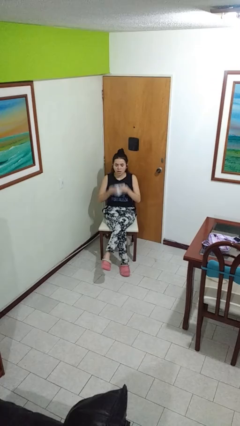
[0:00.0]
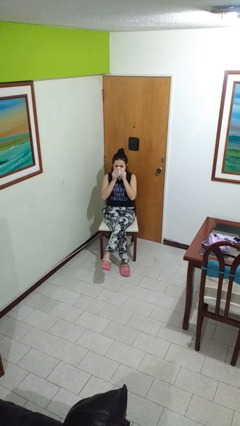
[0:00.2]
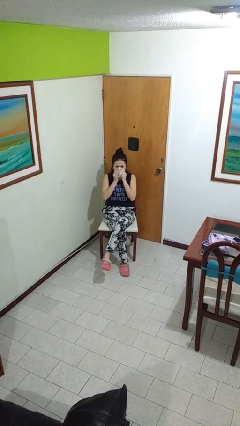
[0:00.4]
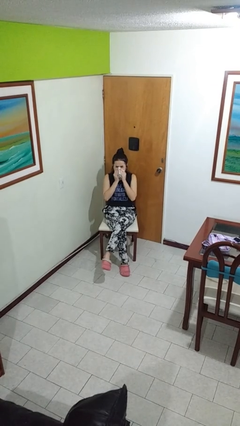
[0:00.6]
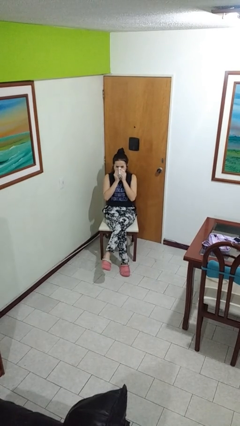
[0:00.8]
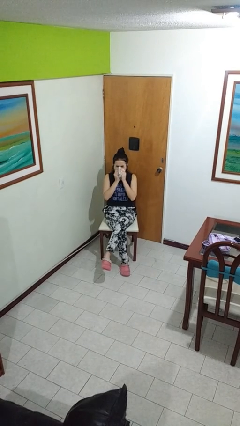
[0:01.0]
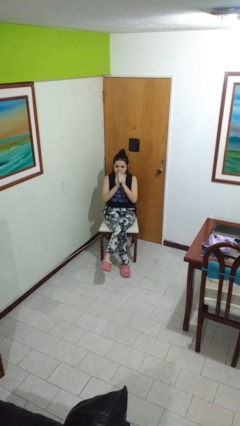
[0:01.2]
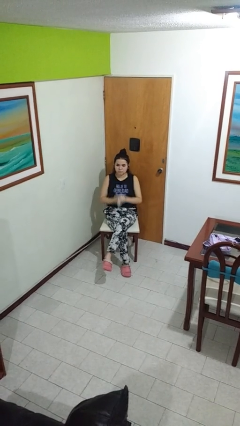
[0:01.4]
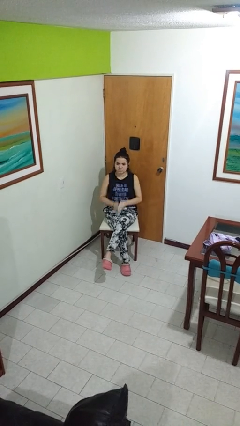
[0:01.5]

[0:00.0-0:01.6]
person blows nose

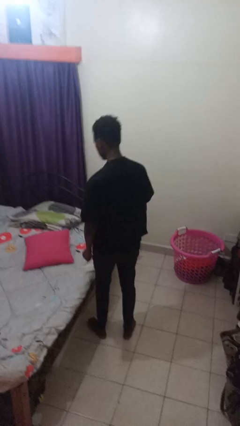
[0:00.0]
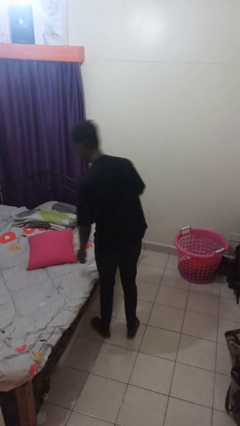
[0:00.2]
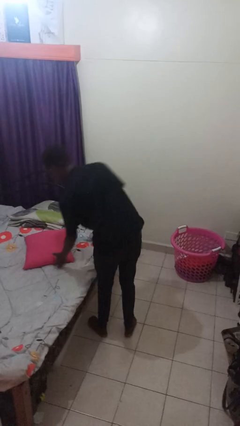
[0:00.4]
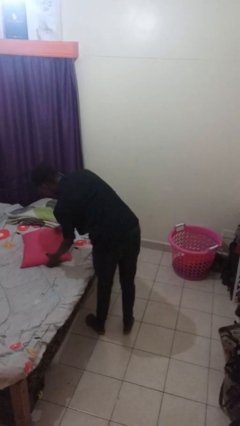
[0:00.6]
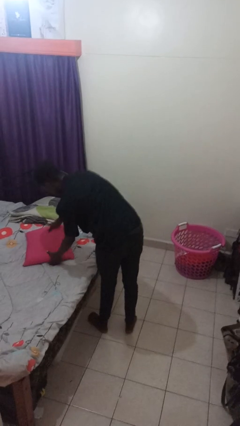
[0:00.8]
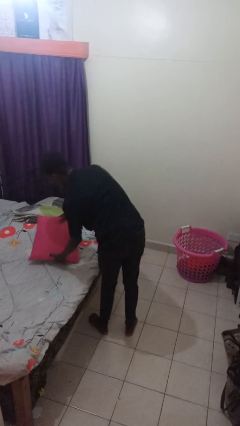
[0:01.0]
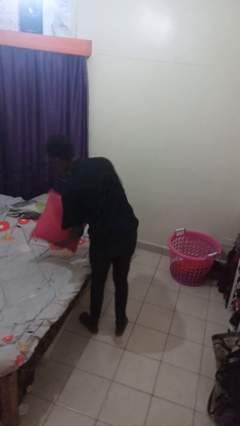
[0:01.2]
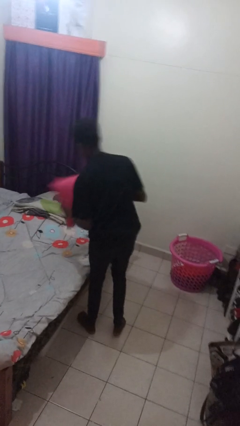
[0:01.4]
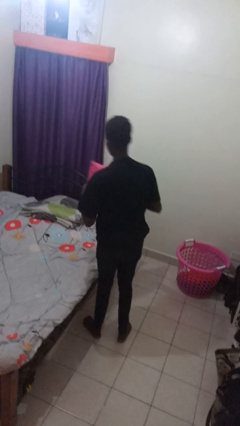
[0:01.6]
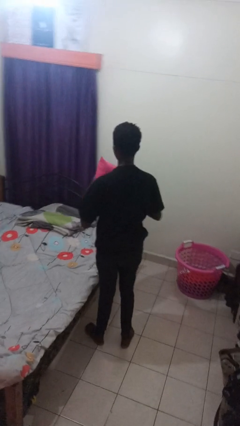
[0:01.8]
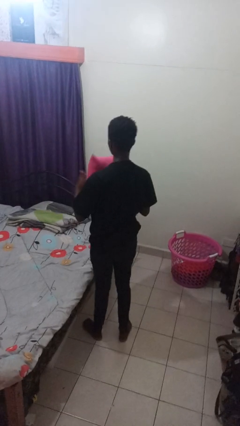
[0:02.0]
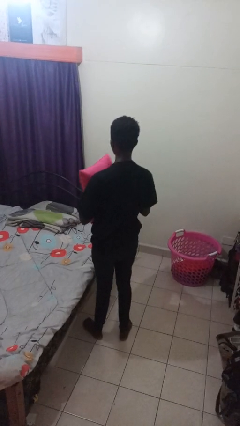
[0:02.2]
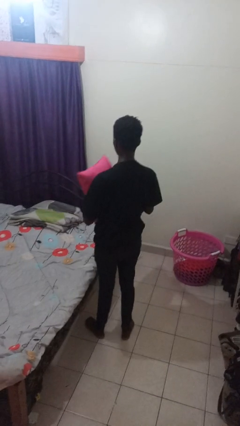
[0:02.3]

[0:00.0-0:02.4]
person picks up object from bed

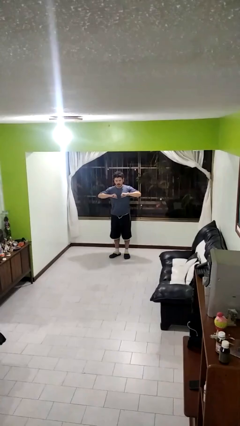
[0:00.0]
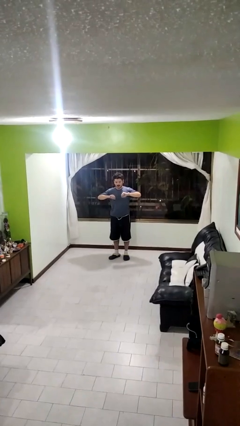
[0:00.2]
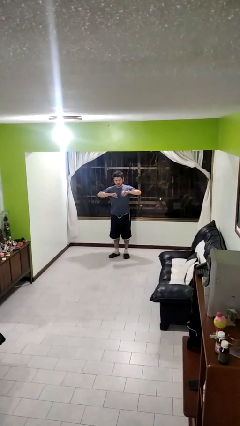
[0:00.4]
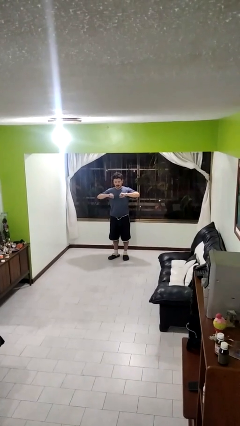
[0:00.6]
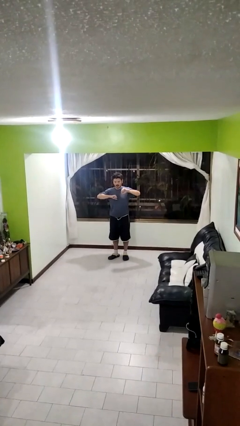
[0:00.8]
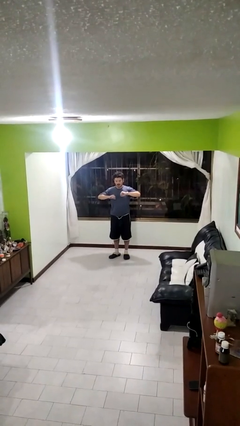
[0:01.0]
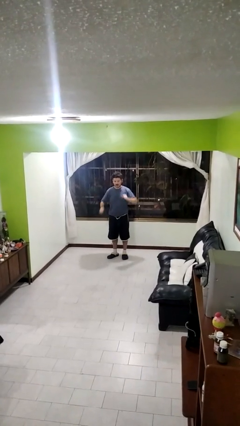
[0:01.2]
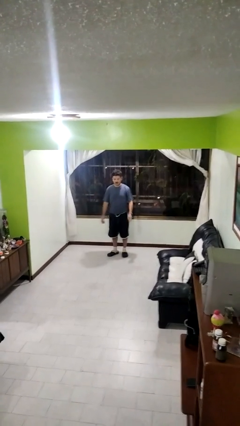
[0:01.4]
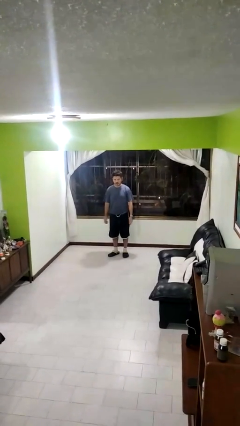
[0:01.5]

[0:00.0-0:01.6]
person drums on chest

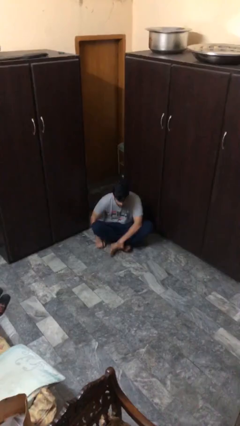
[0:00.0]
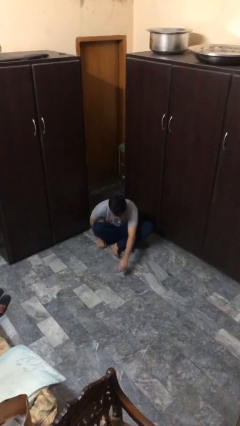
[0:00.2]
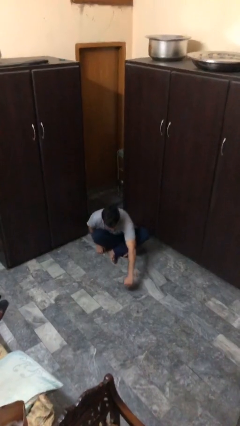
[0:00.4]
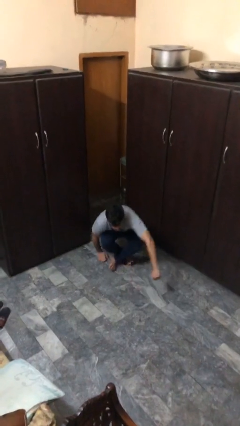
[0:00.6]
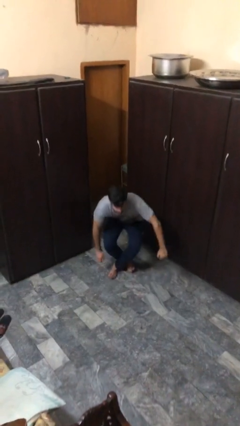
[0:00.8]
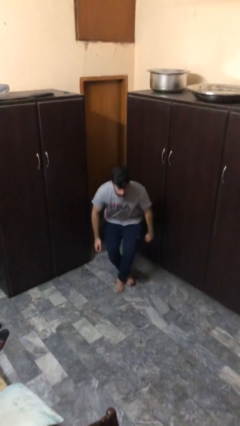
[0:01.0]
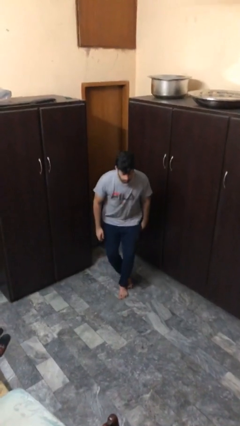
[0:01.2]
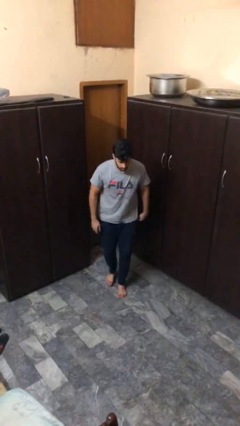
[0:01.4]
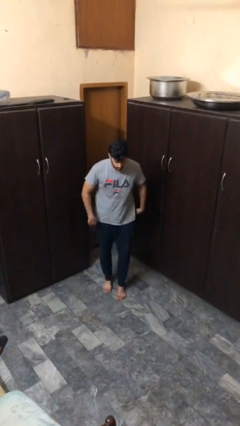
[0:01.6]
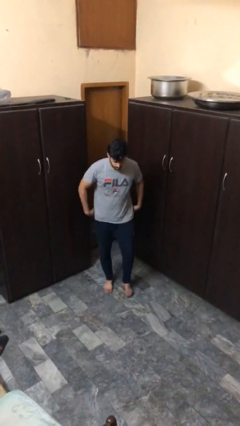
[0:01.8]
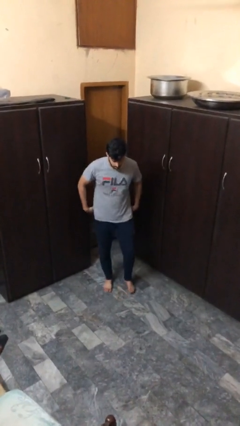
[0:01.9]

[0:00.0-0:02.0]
person stands up from floor

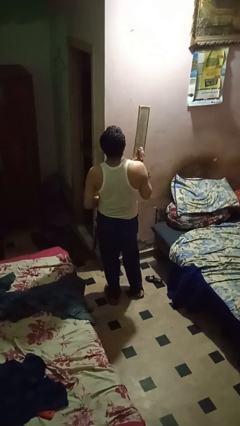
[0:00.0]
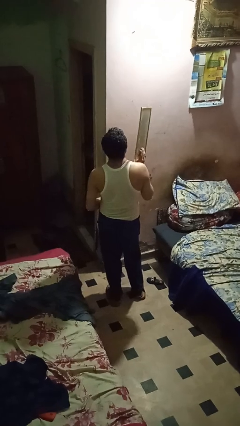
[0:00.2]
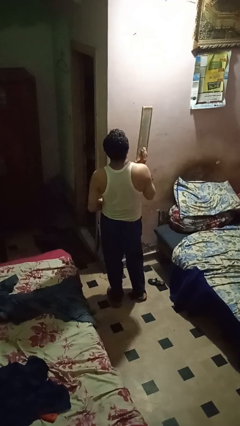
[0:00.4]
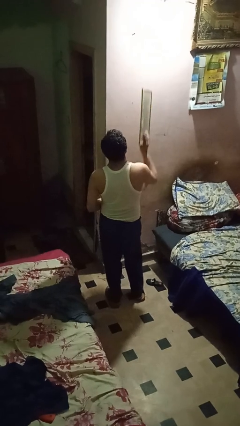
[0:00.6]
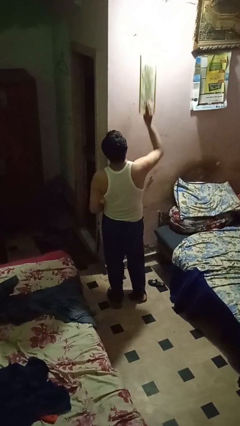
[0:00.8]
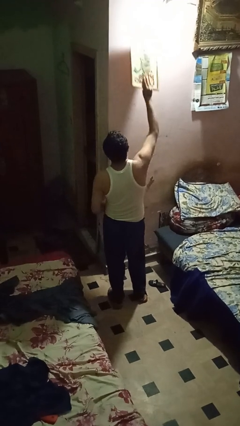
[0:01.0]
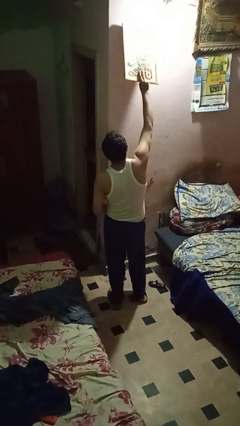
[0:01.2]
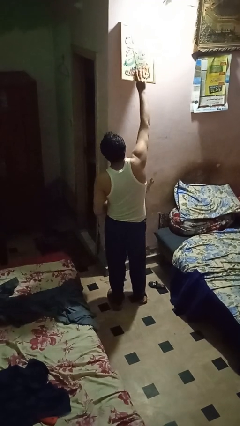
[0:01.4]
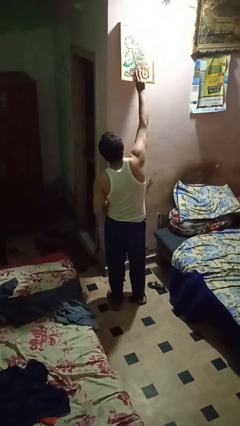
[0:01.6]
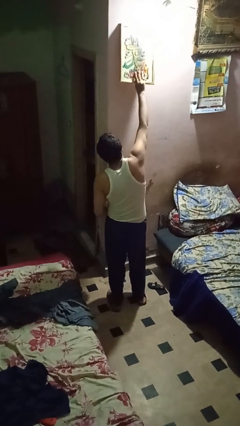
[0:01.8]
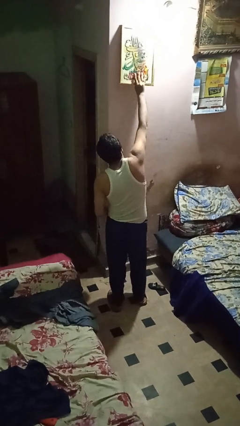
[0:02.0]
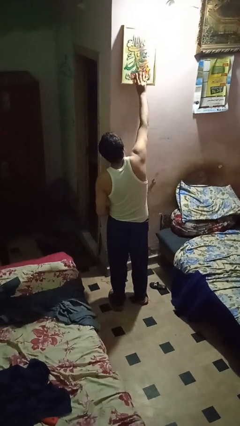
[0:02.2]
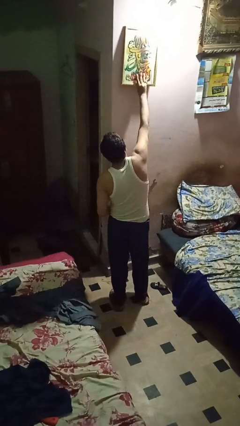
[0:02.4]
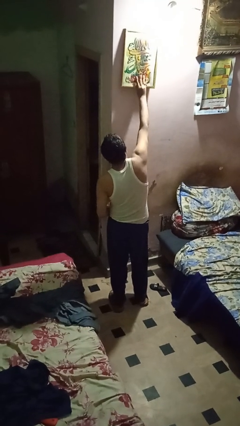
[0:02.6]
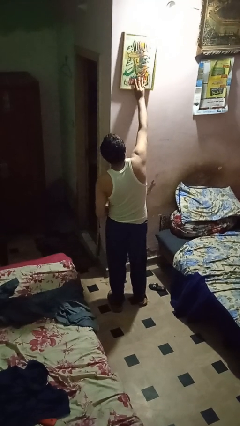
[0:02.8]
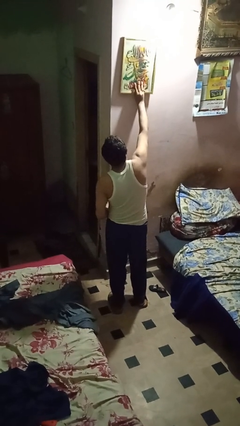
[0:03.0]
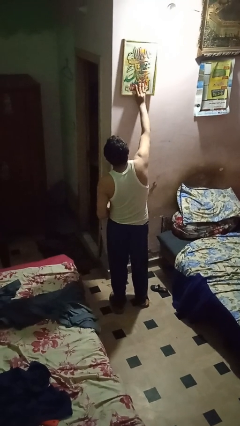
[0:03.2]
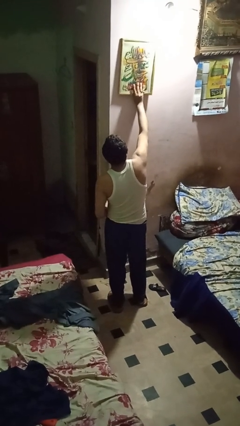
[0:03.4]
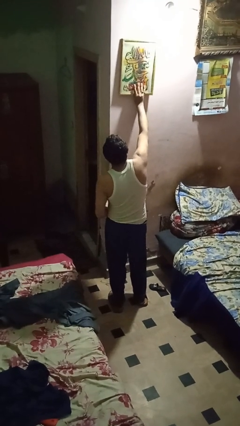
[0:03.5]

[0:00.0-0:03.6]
person puts up picture frame

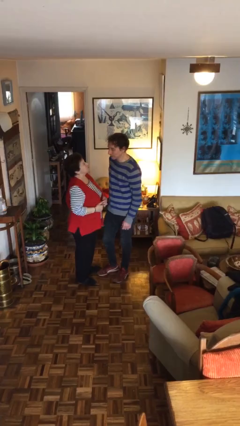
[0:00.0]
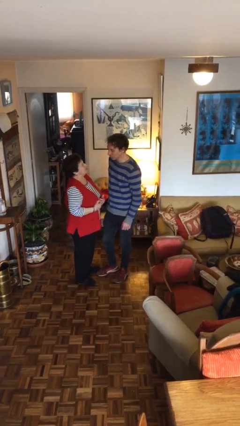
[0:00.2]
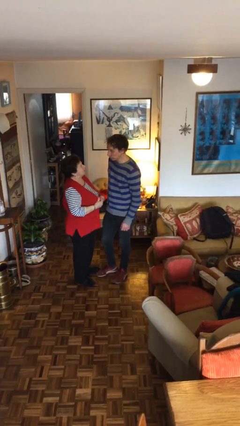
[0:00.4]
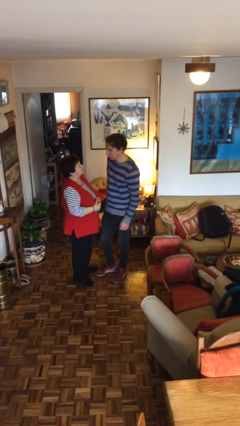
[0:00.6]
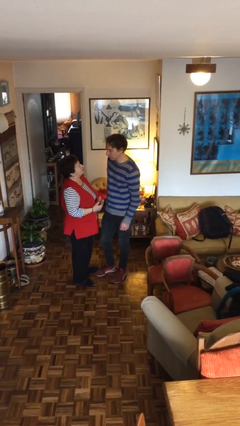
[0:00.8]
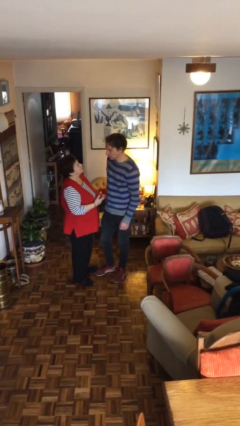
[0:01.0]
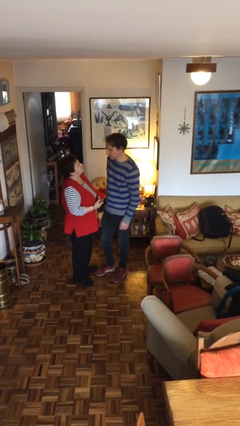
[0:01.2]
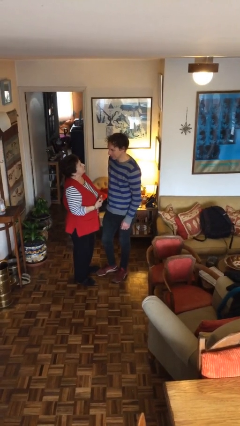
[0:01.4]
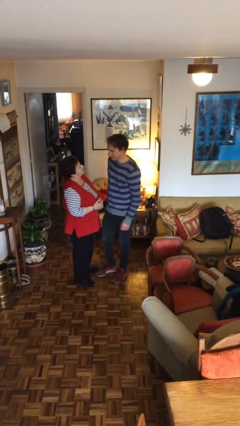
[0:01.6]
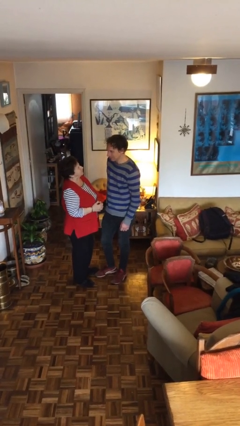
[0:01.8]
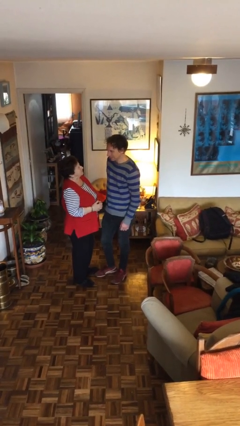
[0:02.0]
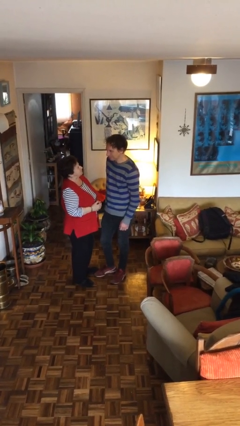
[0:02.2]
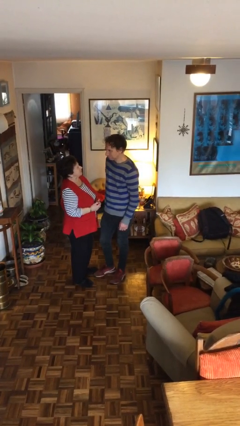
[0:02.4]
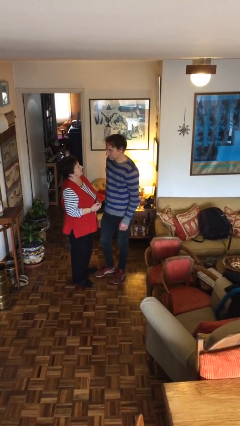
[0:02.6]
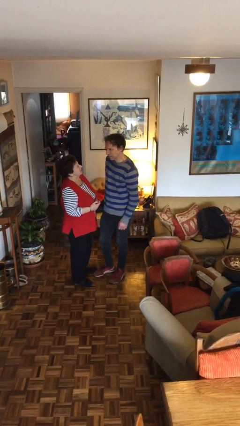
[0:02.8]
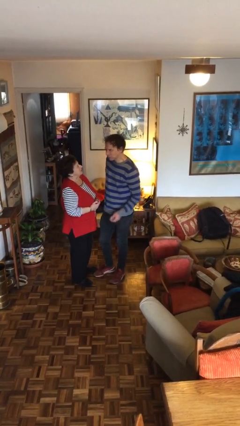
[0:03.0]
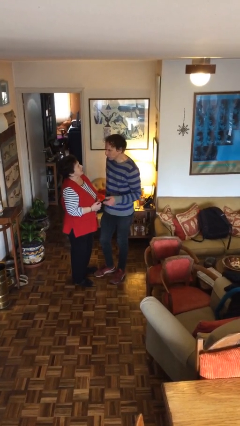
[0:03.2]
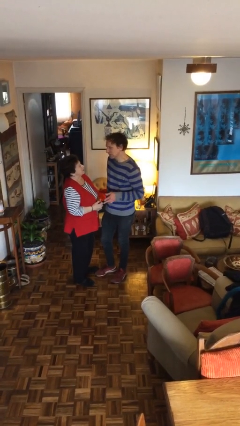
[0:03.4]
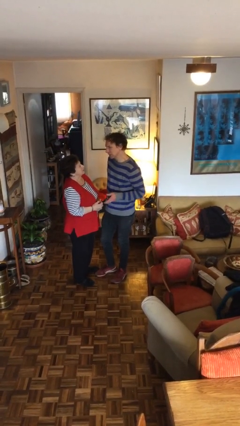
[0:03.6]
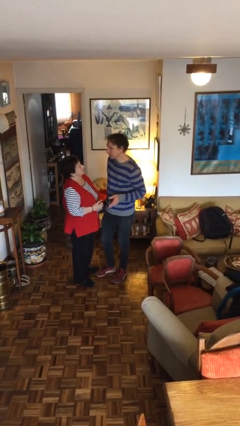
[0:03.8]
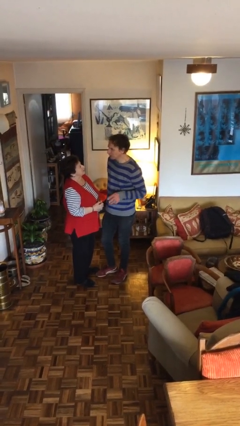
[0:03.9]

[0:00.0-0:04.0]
person talks to person

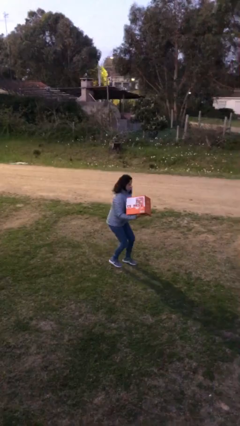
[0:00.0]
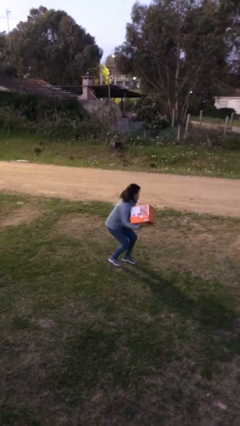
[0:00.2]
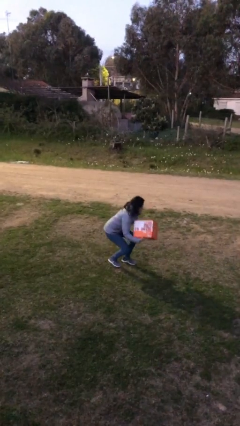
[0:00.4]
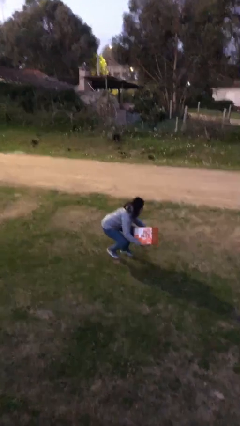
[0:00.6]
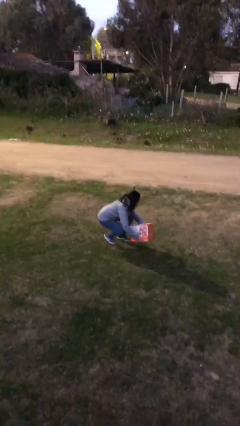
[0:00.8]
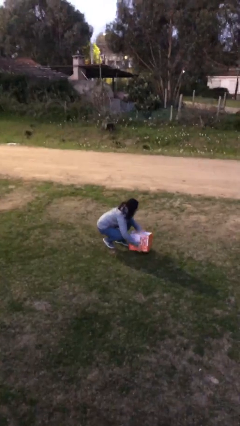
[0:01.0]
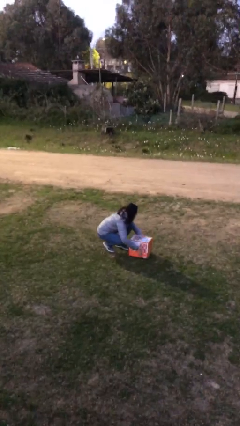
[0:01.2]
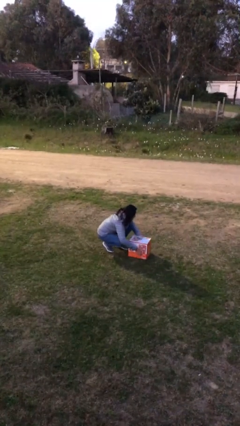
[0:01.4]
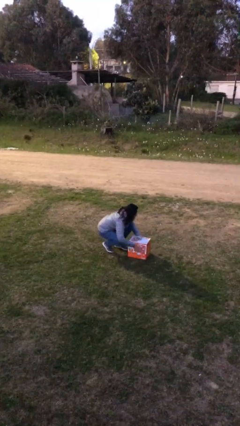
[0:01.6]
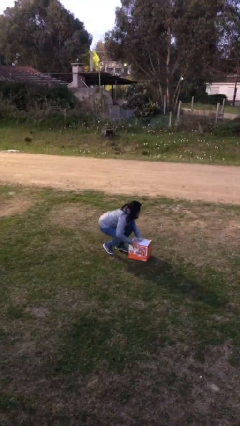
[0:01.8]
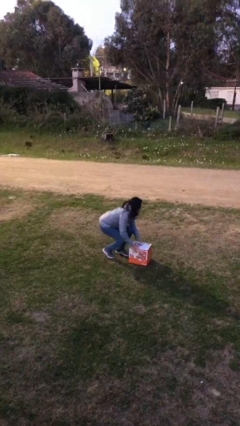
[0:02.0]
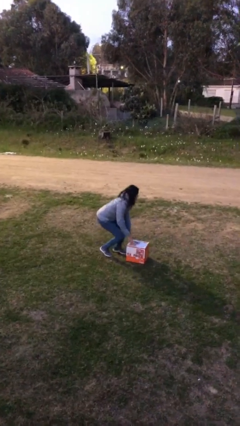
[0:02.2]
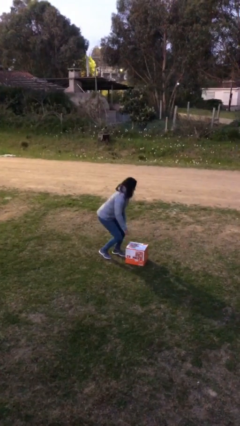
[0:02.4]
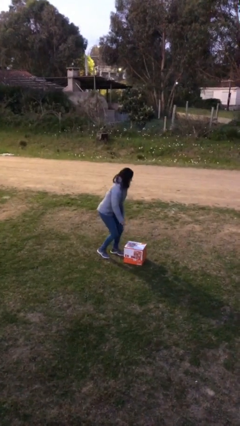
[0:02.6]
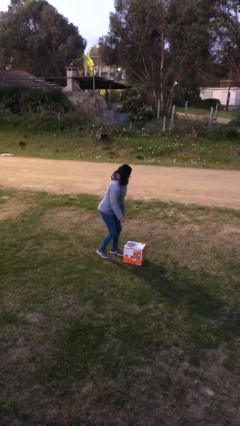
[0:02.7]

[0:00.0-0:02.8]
person puts down object on floor
